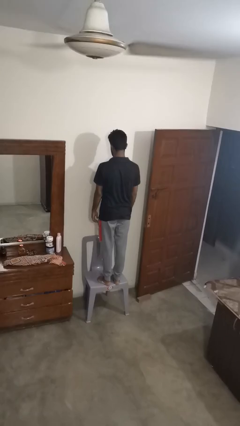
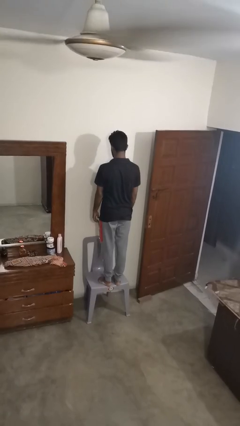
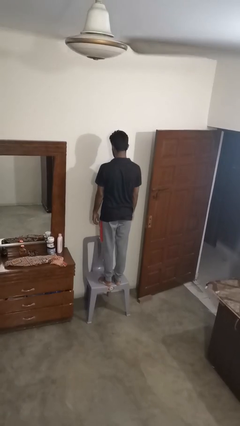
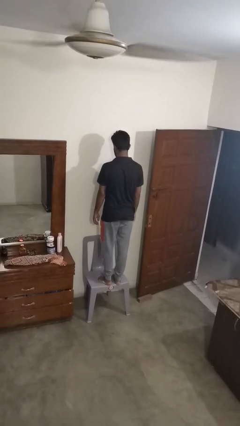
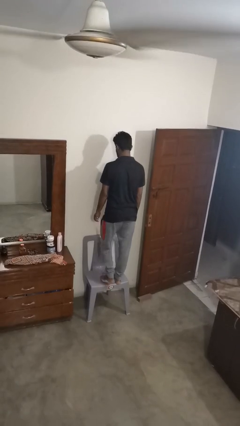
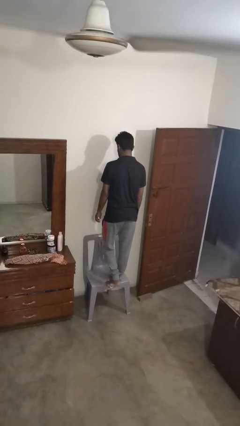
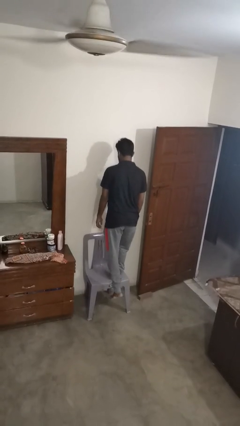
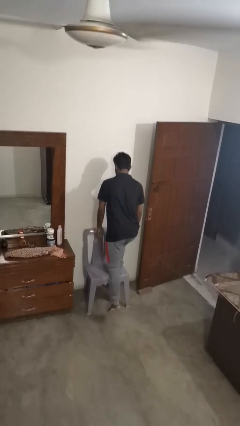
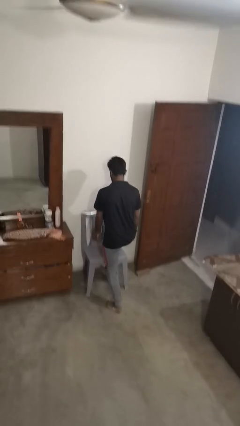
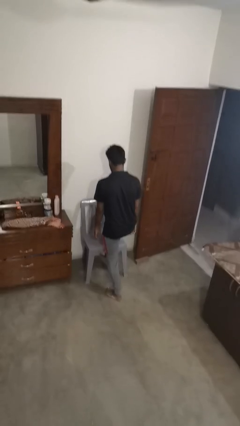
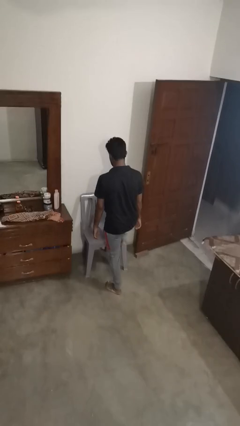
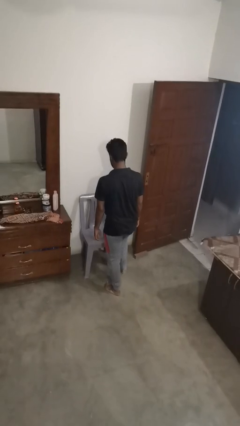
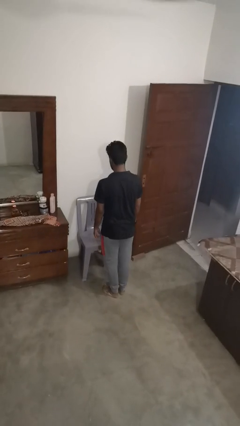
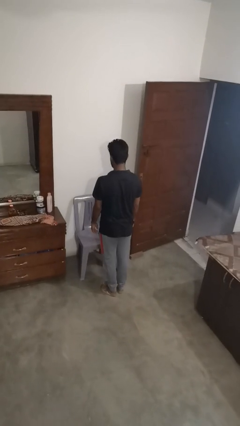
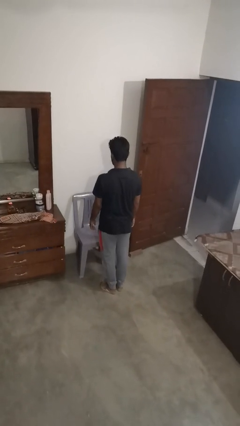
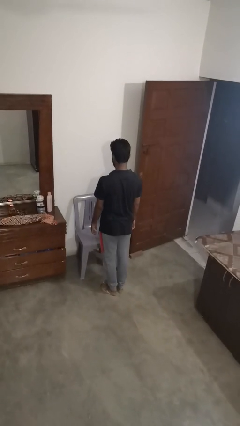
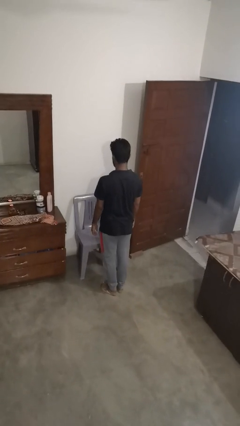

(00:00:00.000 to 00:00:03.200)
person climbs off chair

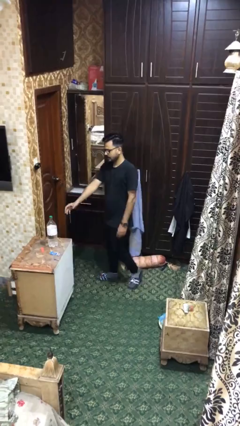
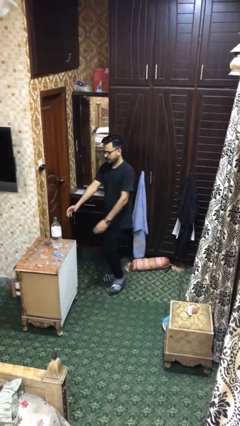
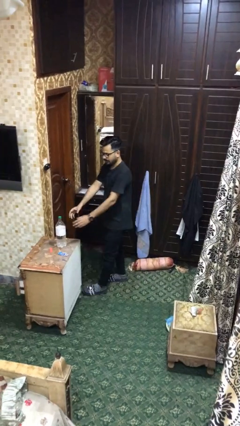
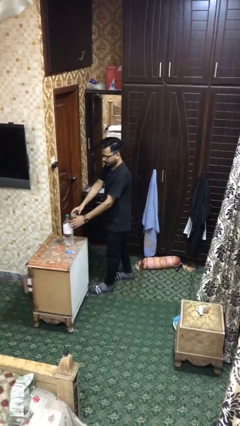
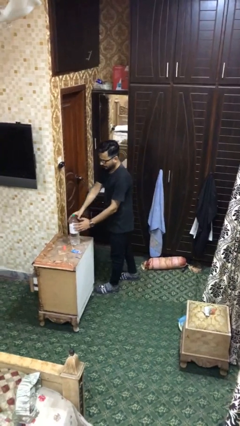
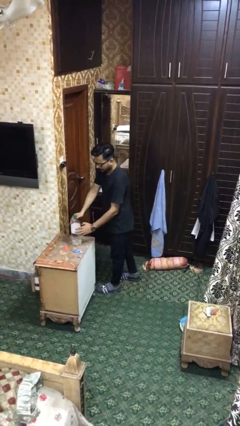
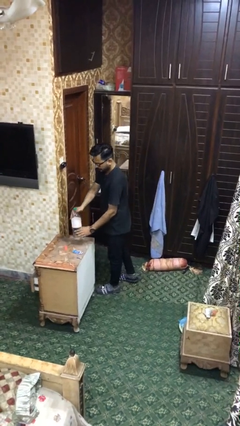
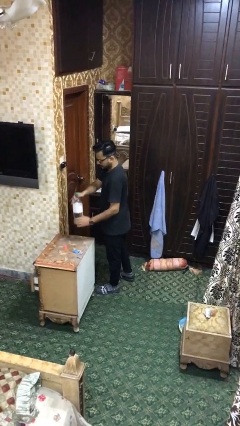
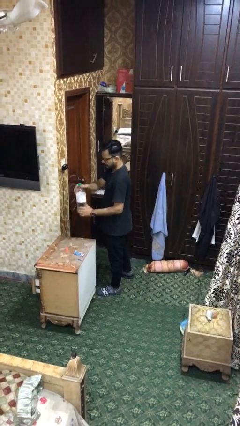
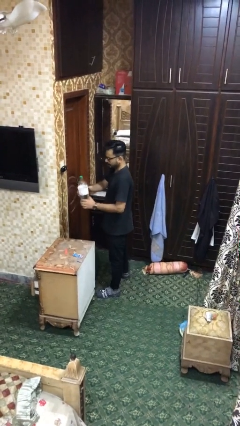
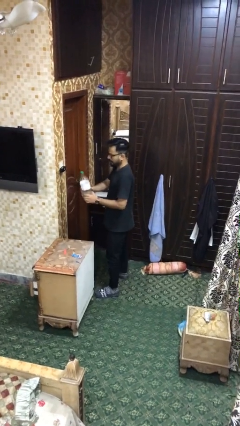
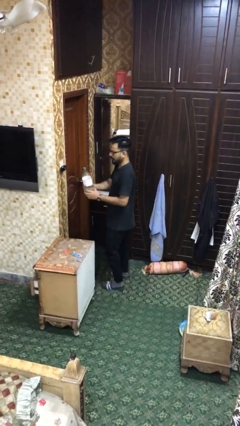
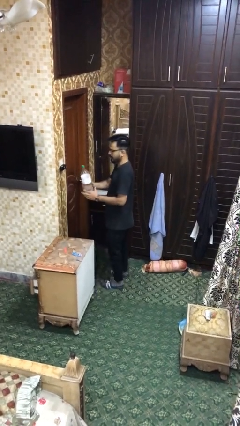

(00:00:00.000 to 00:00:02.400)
person picks up object from table

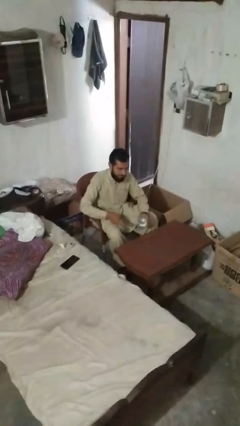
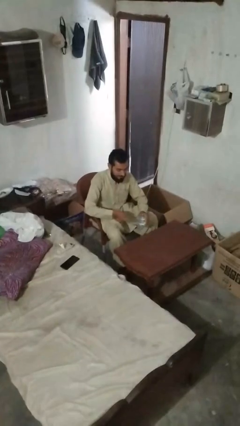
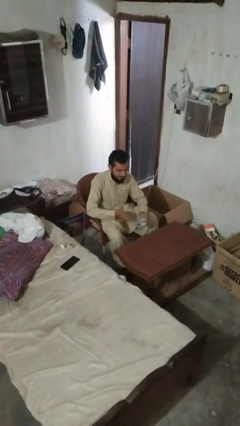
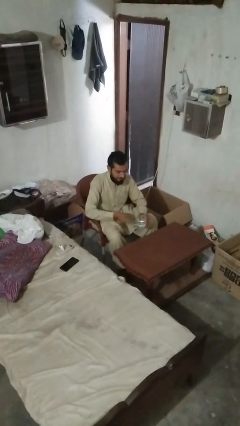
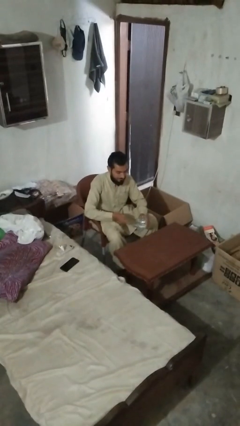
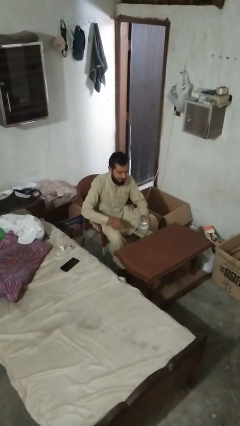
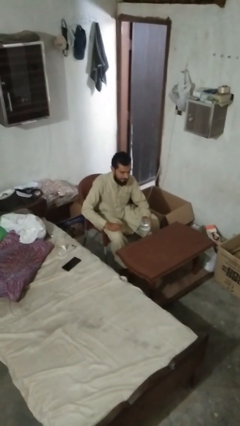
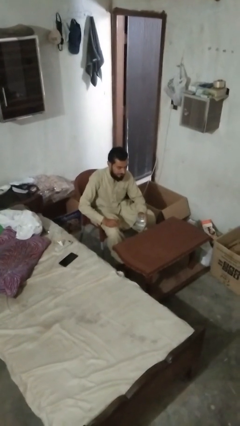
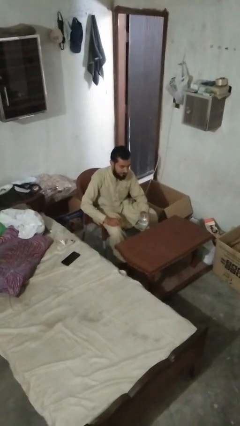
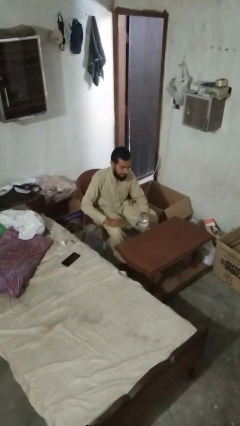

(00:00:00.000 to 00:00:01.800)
person knocks over glass

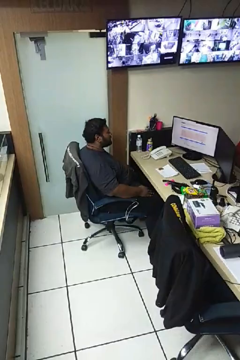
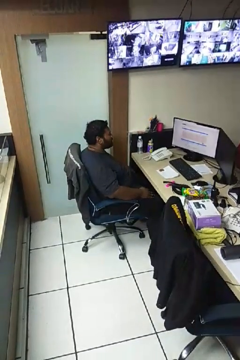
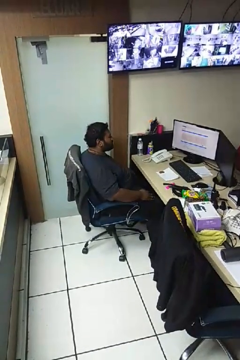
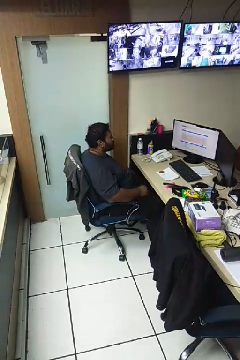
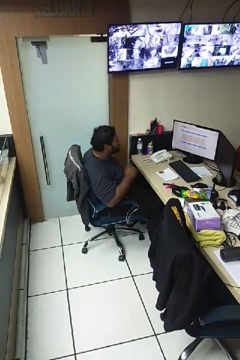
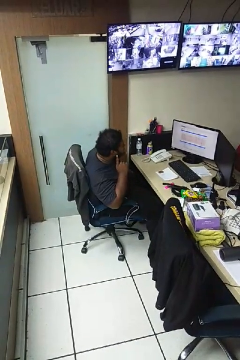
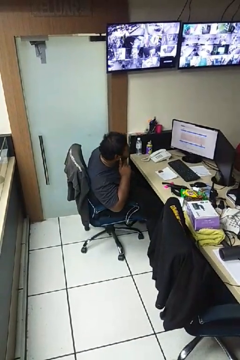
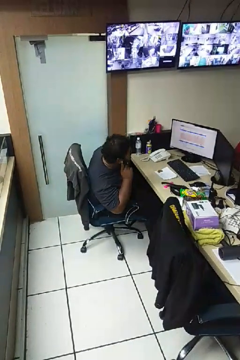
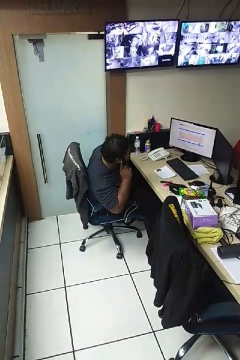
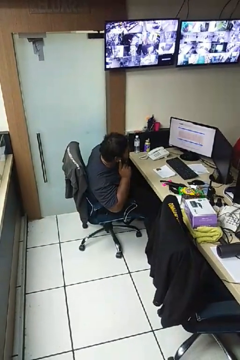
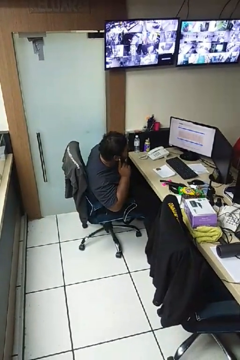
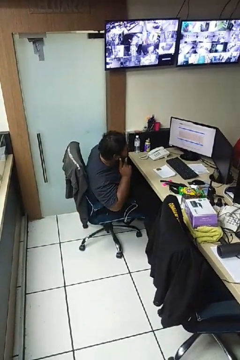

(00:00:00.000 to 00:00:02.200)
person gestures listen closely

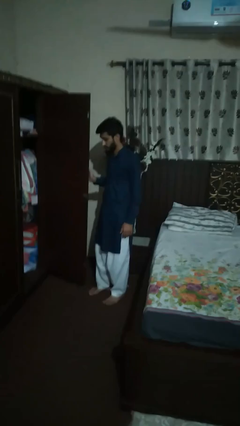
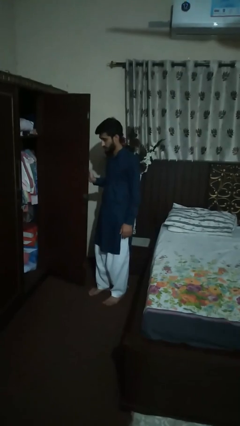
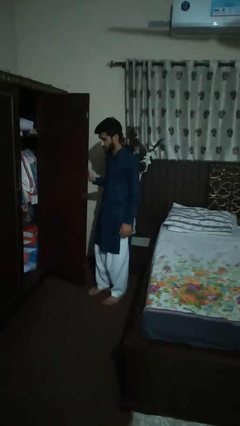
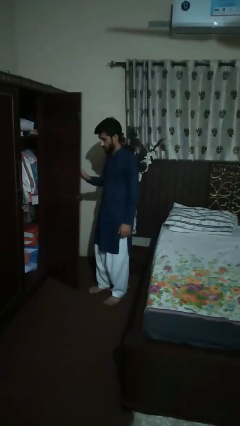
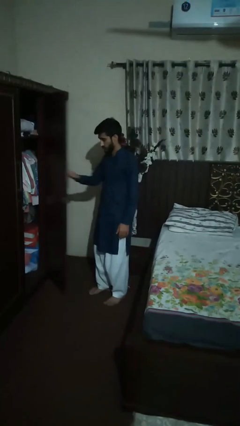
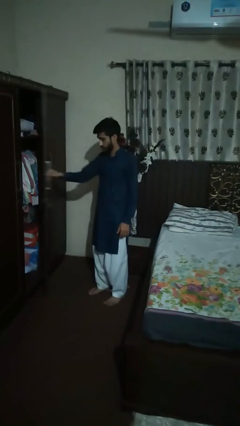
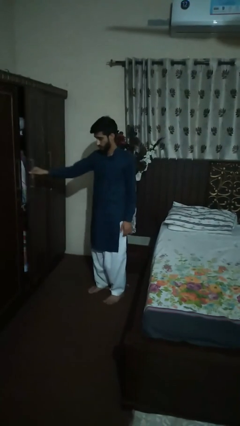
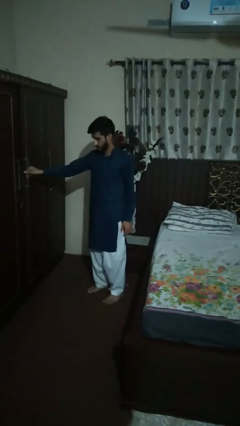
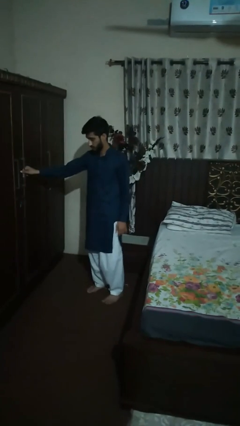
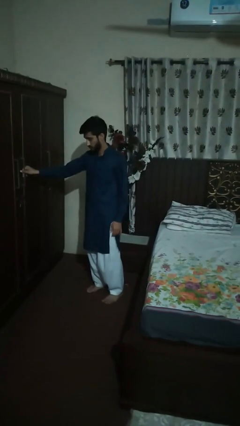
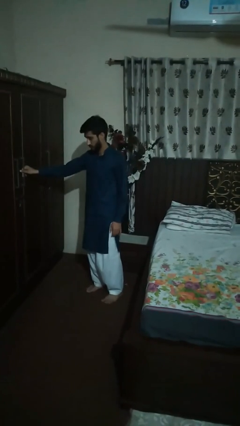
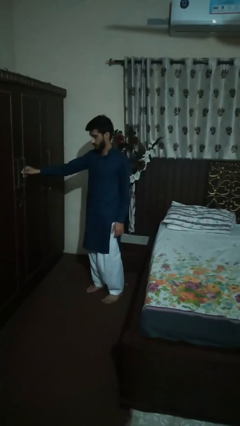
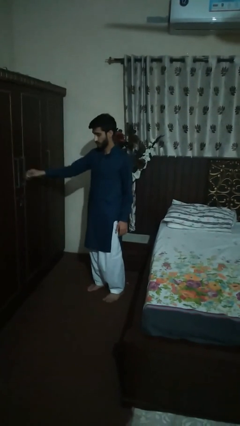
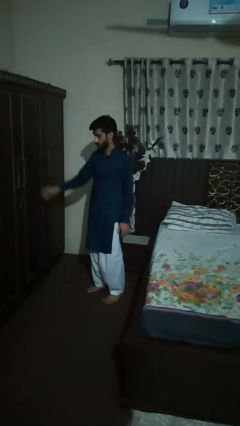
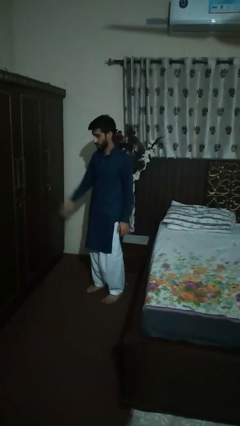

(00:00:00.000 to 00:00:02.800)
person closes dresser drawer

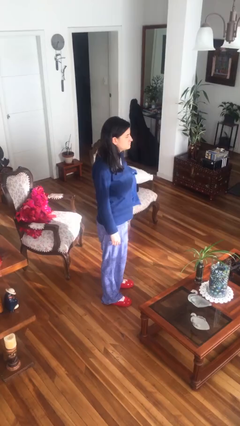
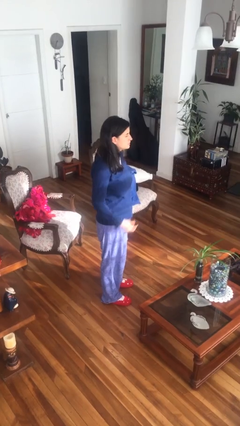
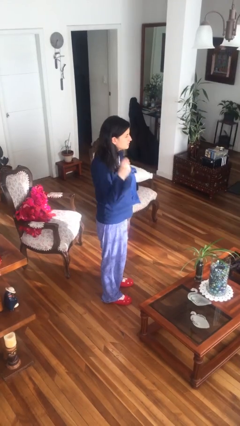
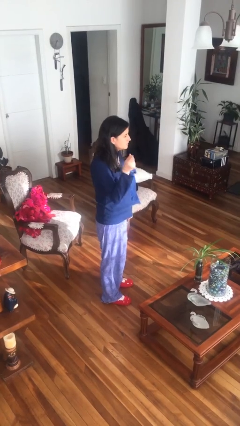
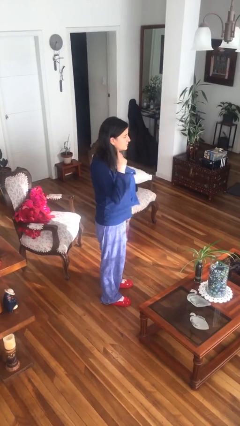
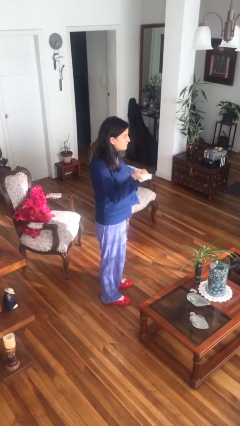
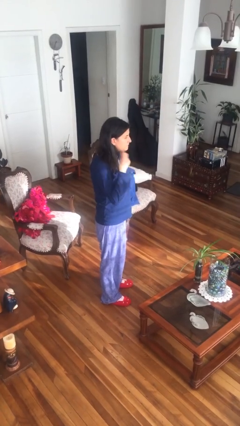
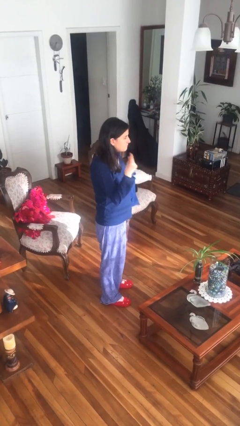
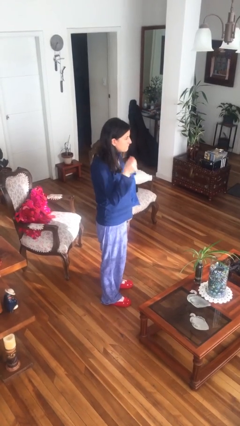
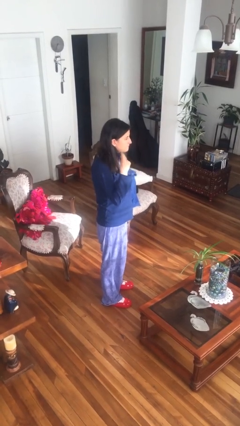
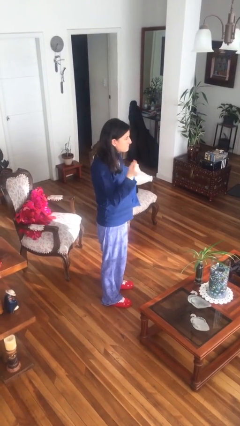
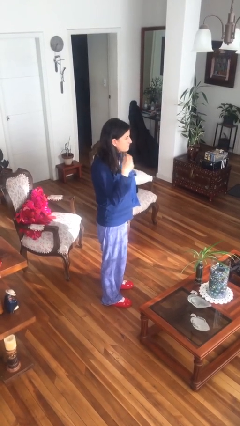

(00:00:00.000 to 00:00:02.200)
person snaps fingers

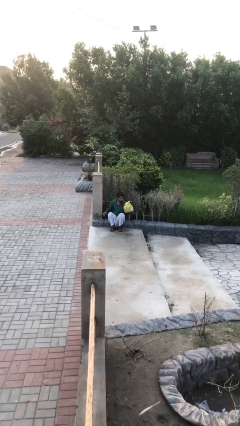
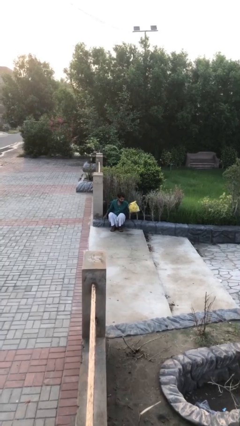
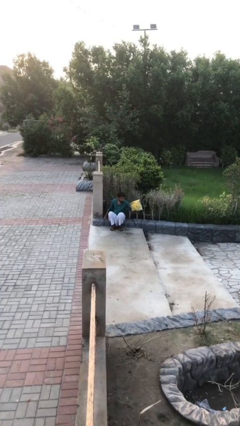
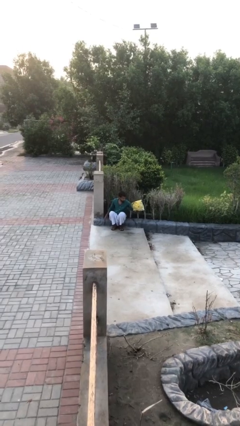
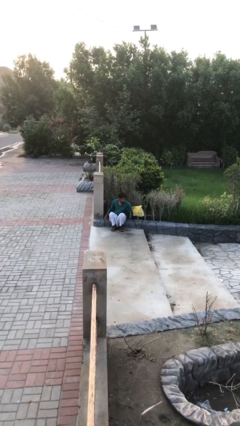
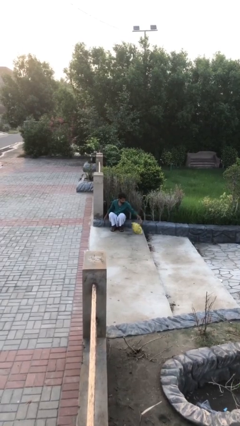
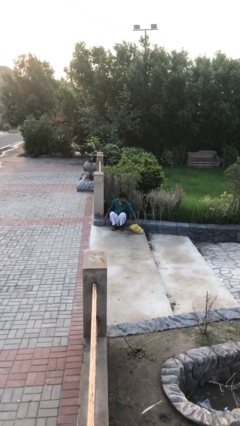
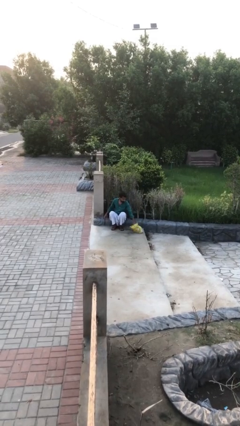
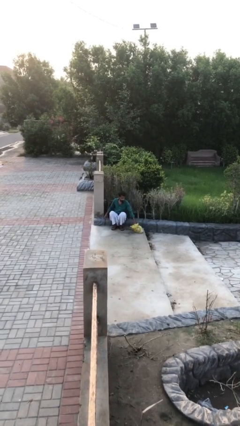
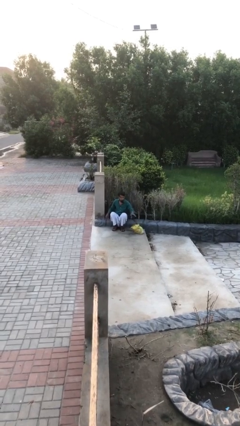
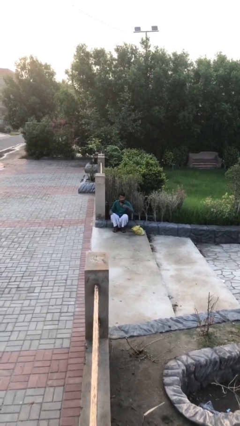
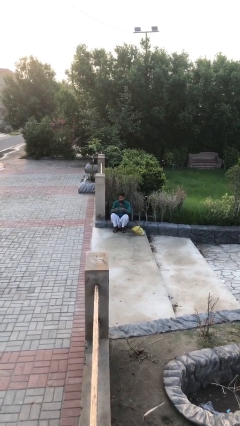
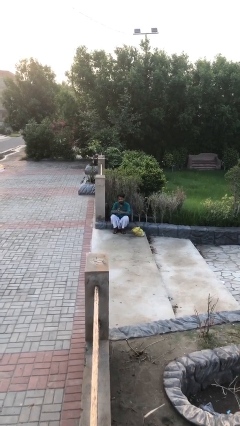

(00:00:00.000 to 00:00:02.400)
person puts down object on floor

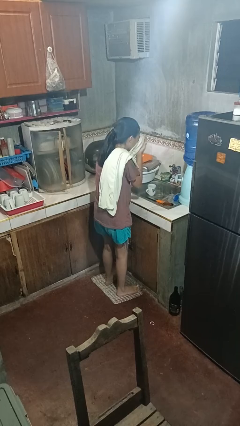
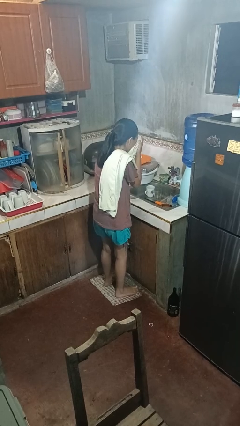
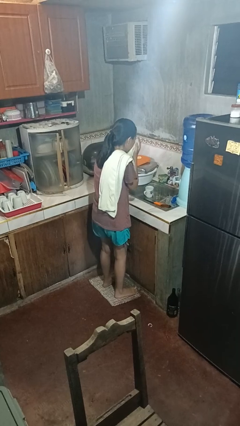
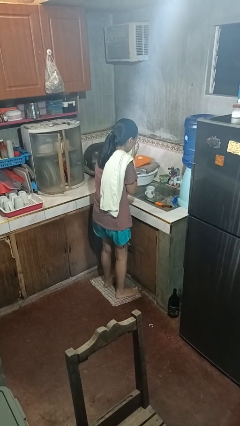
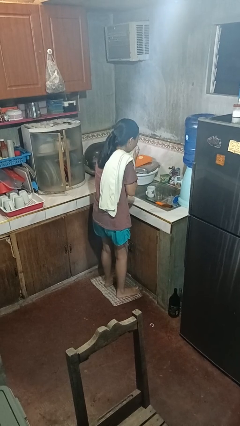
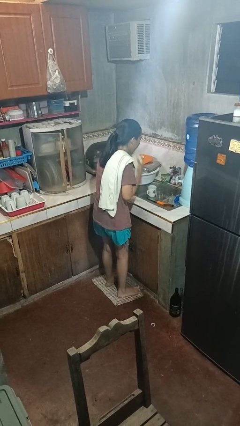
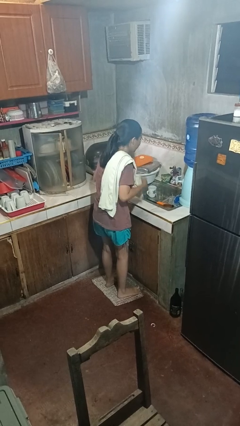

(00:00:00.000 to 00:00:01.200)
person dries face with towel
